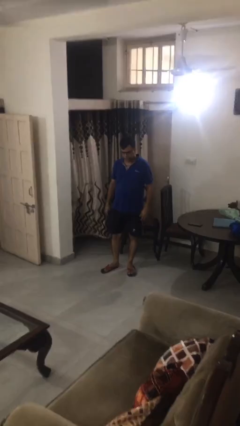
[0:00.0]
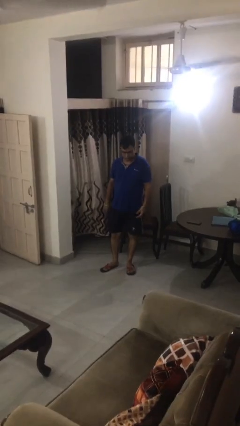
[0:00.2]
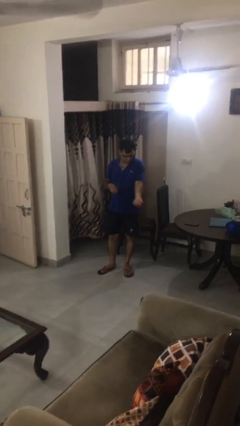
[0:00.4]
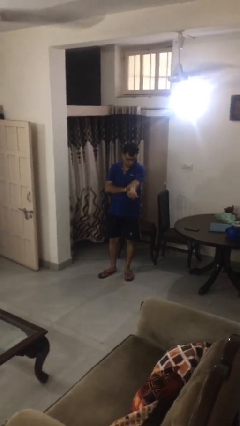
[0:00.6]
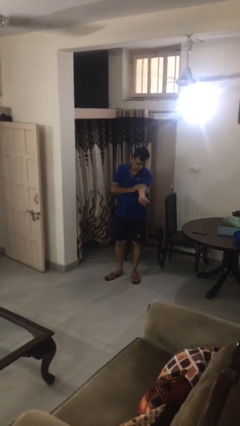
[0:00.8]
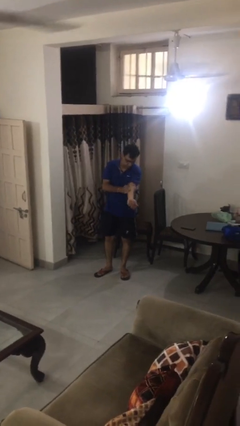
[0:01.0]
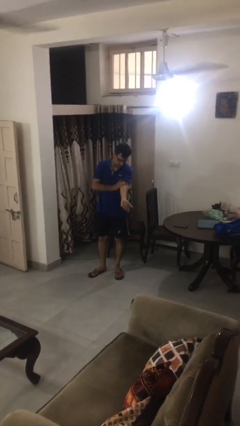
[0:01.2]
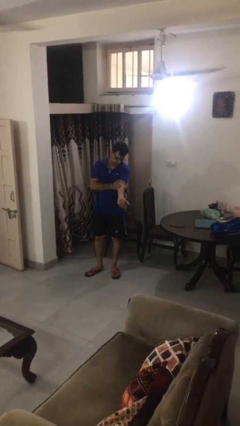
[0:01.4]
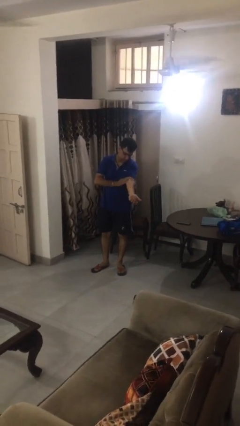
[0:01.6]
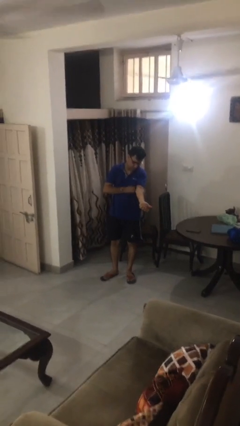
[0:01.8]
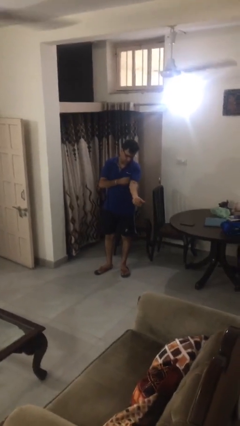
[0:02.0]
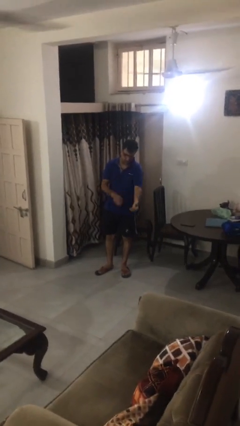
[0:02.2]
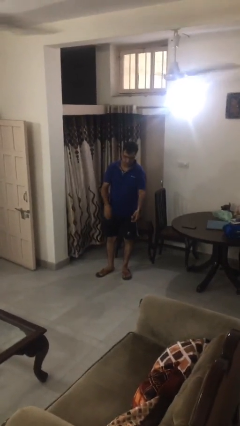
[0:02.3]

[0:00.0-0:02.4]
person swats bug

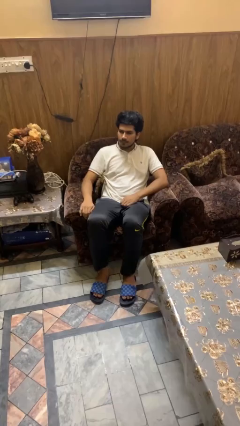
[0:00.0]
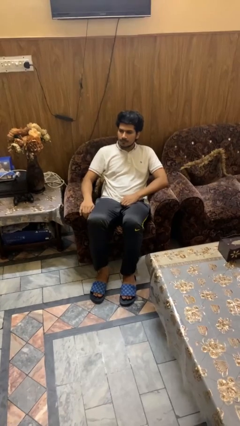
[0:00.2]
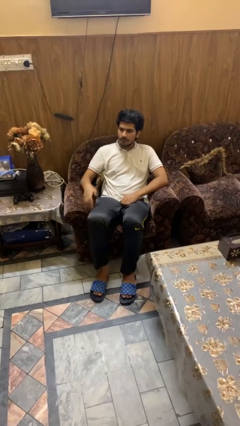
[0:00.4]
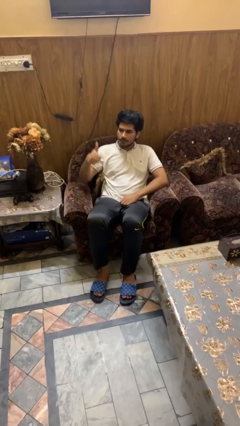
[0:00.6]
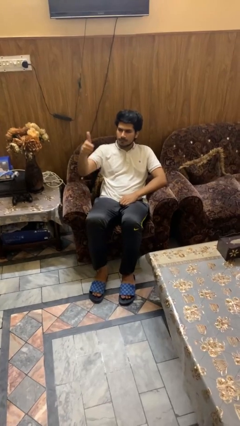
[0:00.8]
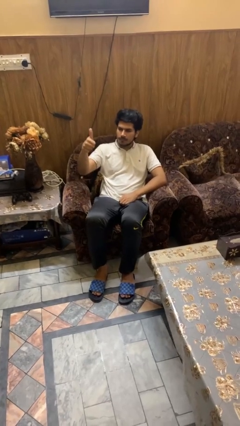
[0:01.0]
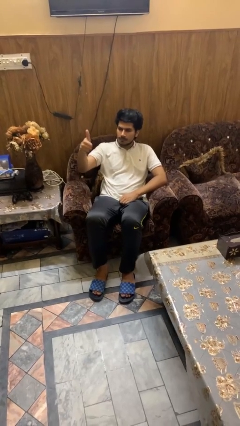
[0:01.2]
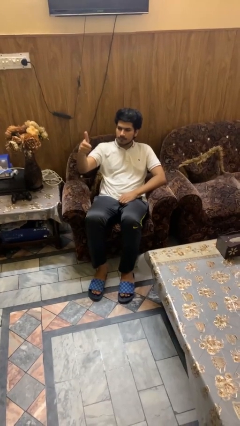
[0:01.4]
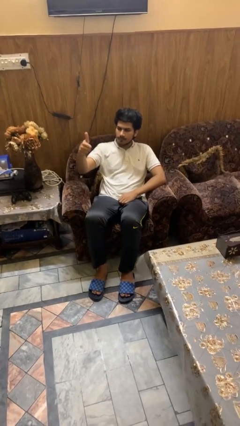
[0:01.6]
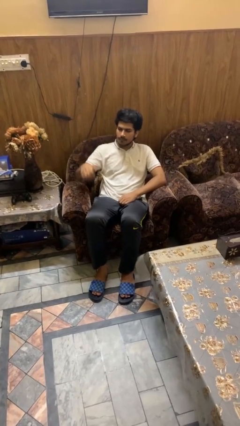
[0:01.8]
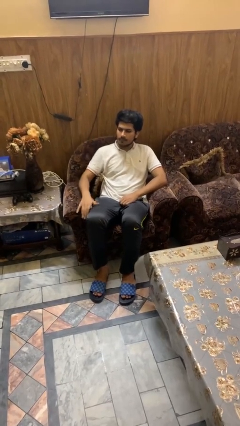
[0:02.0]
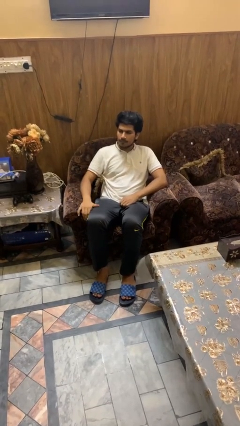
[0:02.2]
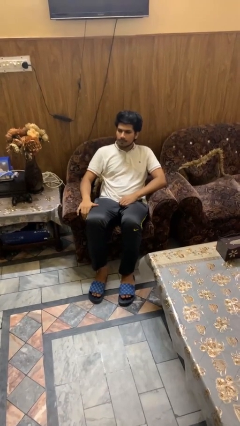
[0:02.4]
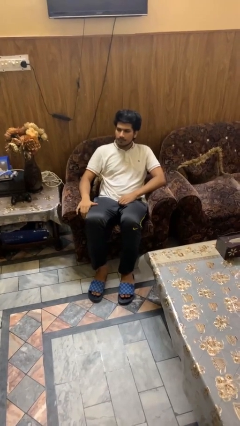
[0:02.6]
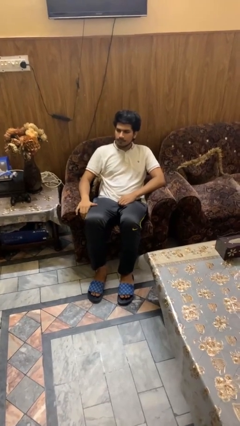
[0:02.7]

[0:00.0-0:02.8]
person gestures thumbs up

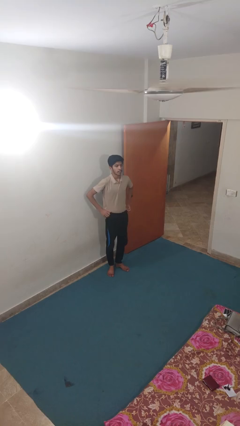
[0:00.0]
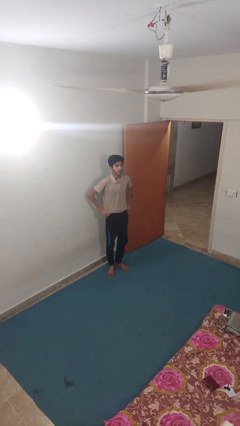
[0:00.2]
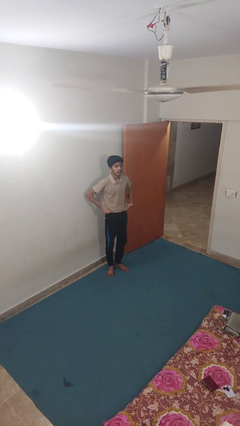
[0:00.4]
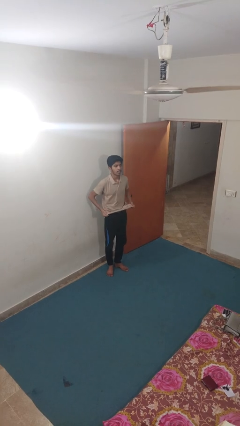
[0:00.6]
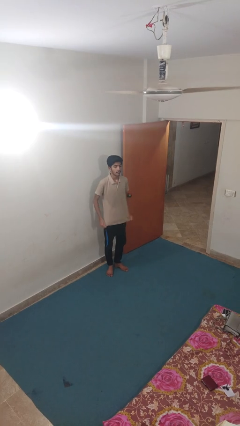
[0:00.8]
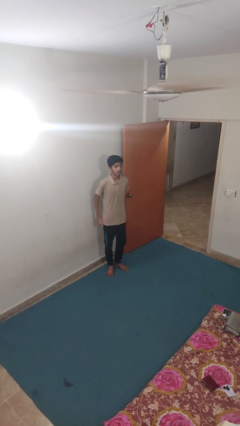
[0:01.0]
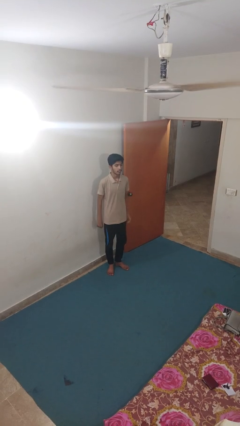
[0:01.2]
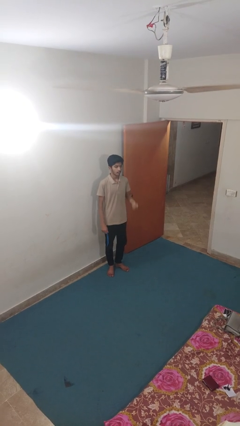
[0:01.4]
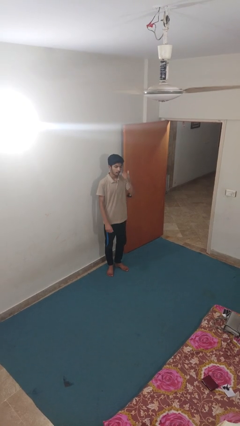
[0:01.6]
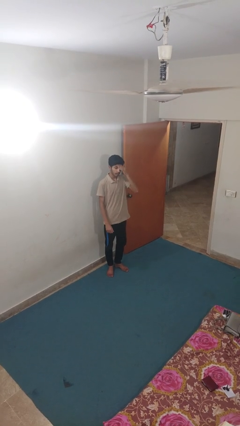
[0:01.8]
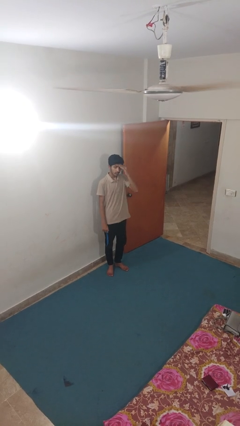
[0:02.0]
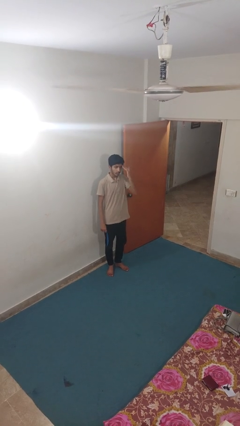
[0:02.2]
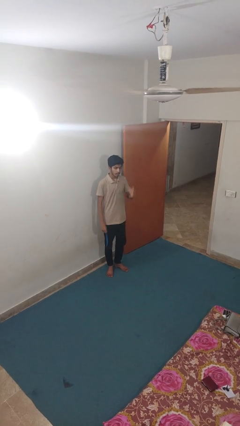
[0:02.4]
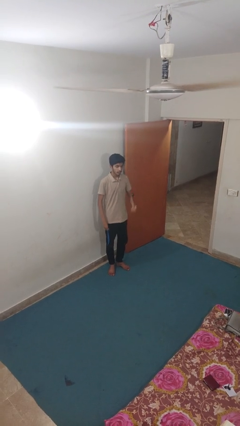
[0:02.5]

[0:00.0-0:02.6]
person untucks shirt

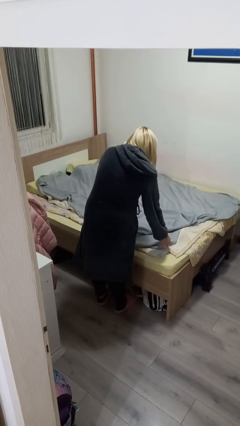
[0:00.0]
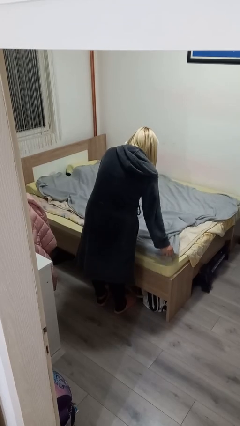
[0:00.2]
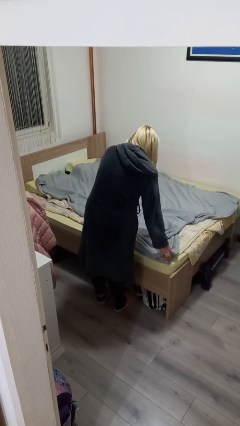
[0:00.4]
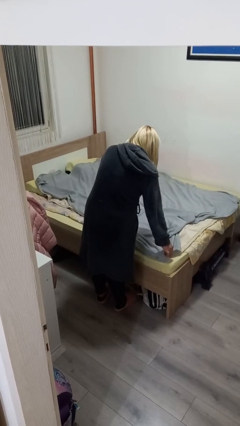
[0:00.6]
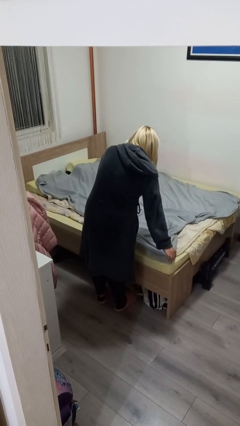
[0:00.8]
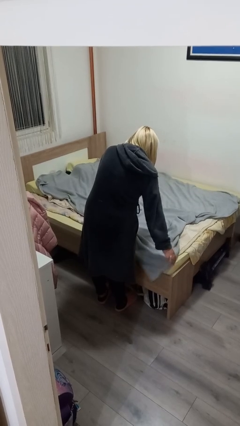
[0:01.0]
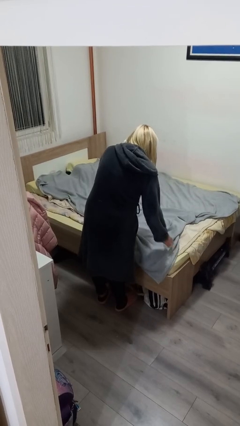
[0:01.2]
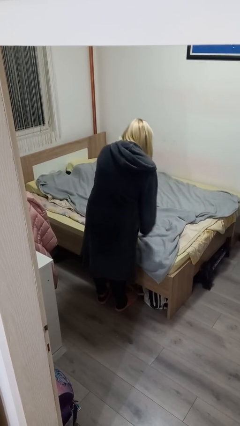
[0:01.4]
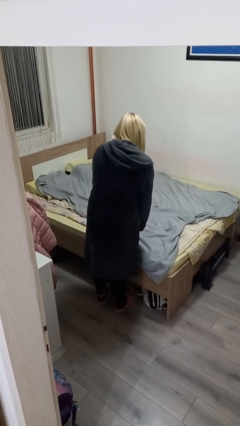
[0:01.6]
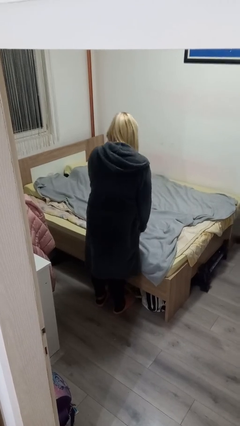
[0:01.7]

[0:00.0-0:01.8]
person makes bed

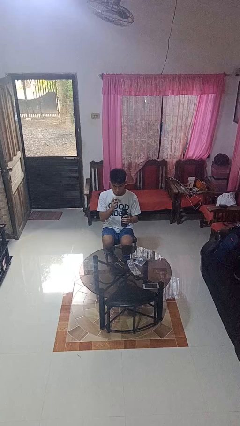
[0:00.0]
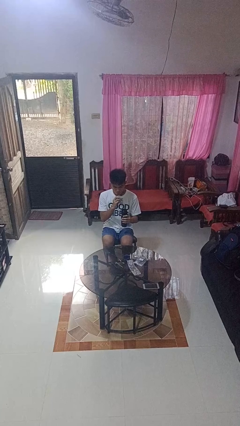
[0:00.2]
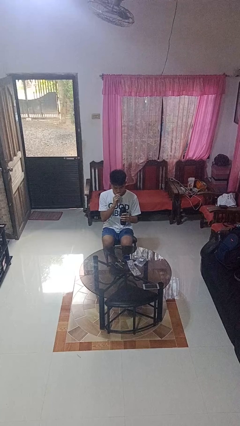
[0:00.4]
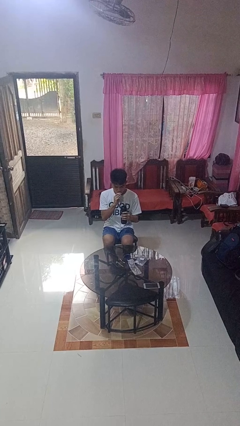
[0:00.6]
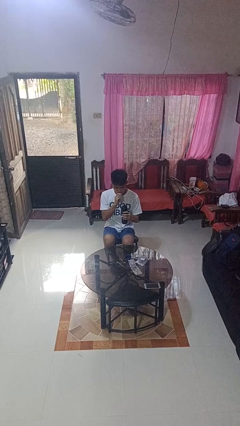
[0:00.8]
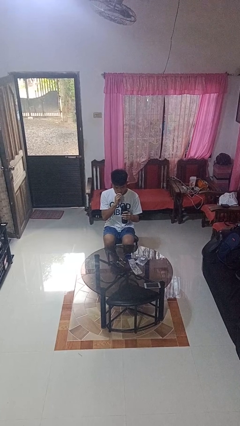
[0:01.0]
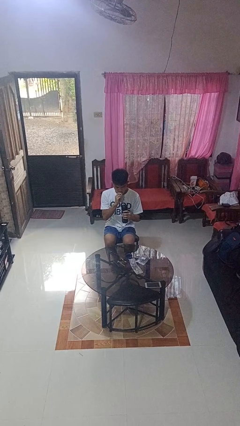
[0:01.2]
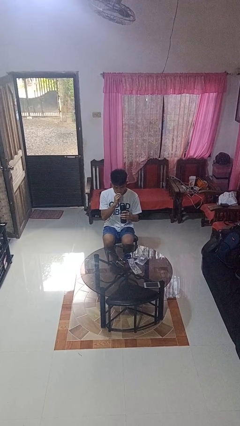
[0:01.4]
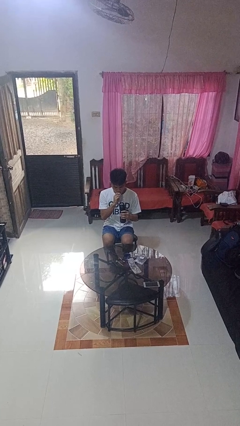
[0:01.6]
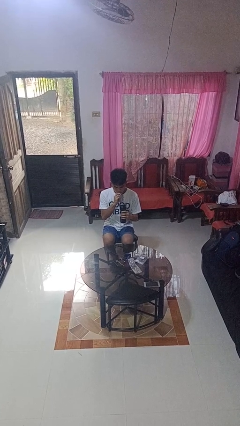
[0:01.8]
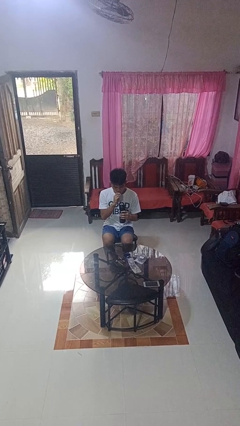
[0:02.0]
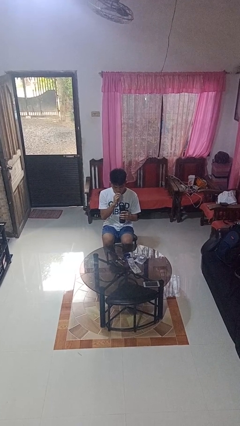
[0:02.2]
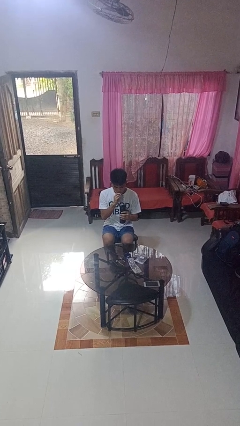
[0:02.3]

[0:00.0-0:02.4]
person drinks from straw

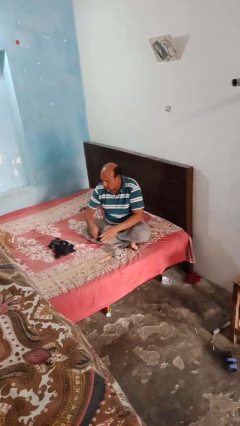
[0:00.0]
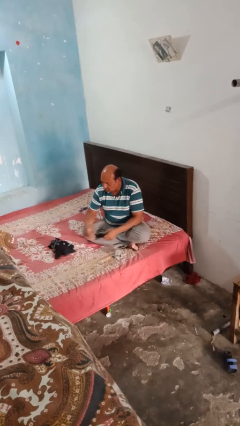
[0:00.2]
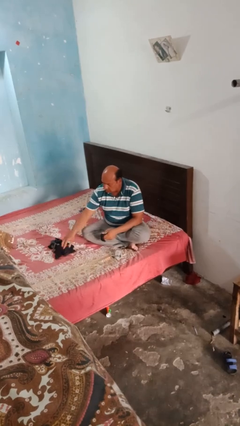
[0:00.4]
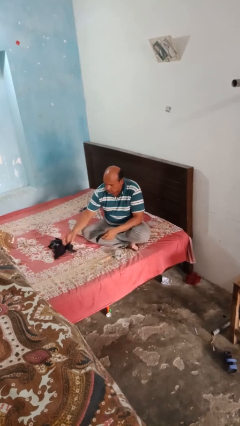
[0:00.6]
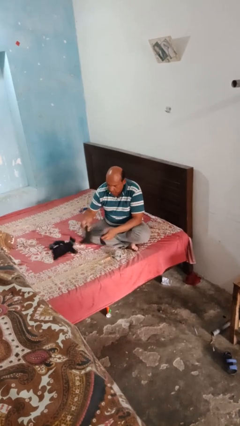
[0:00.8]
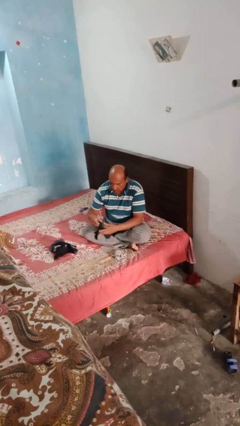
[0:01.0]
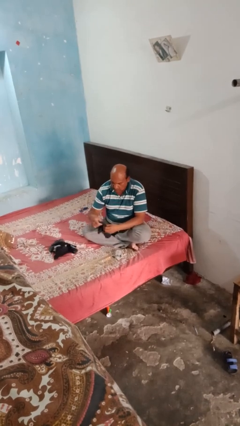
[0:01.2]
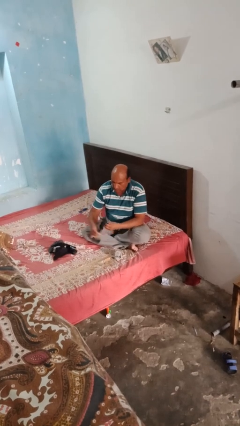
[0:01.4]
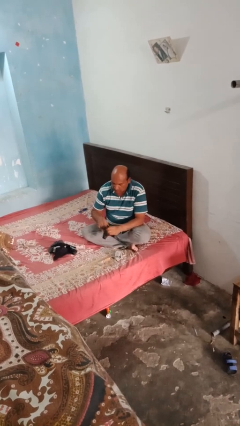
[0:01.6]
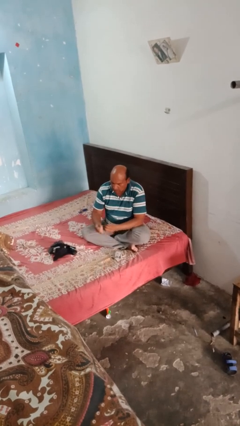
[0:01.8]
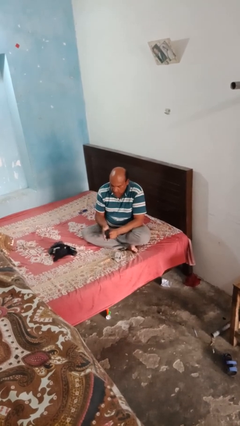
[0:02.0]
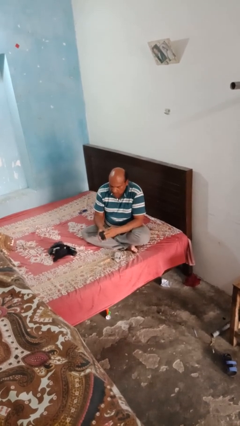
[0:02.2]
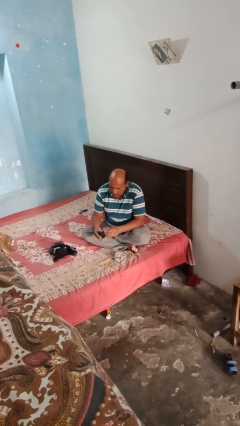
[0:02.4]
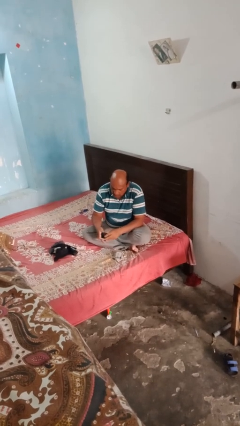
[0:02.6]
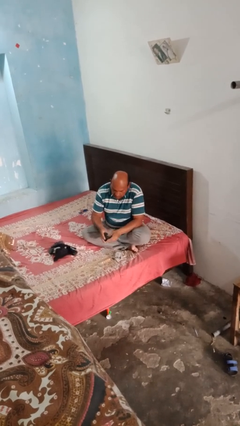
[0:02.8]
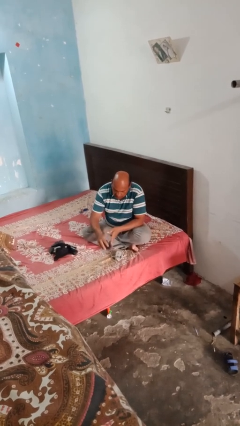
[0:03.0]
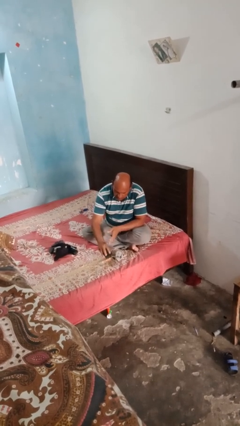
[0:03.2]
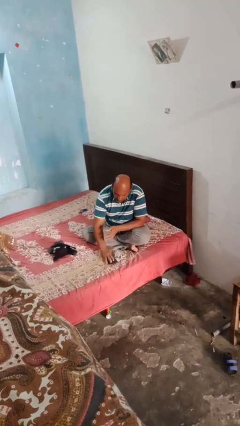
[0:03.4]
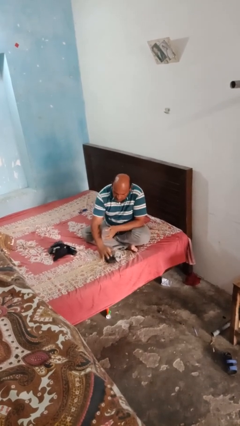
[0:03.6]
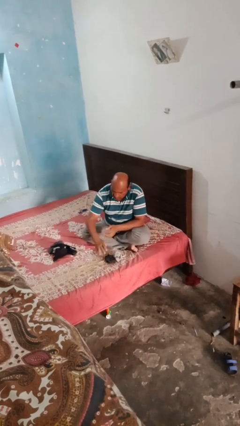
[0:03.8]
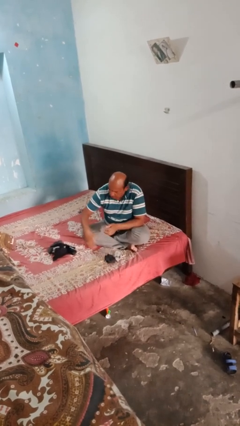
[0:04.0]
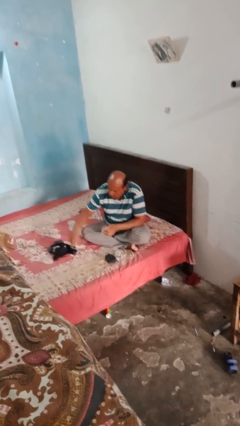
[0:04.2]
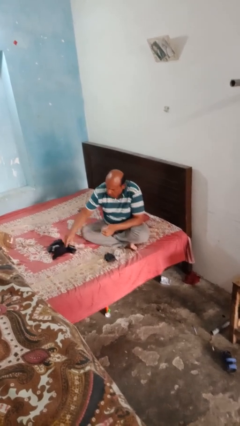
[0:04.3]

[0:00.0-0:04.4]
person folds socks

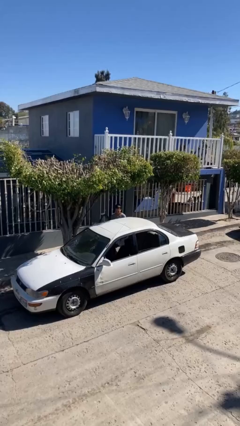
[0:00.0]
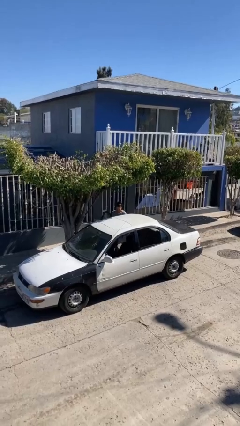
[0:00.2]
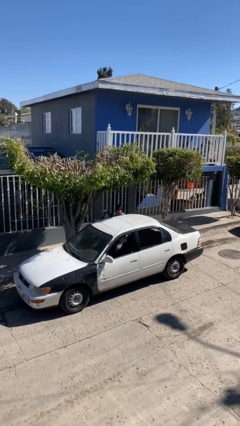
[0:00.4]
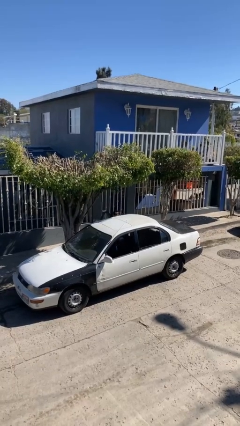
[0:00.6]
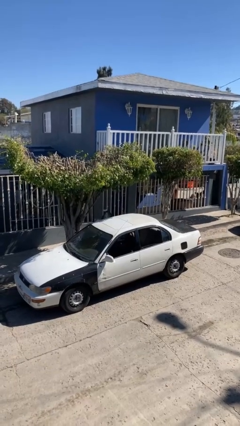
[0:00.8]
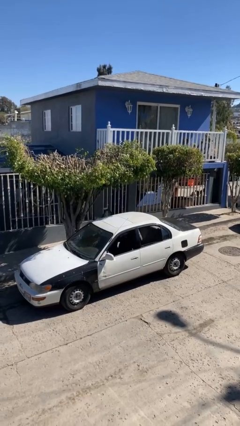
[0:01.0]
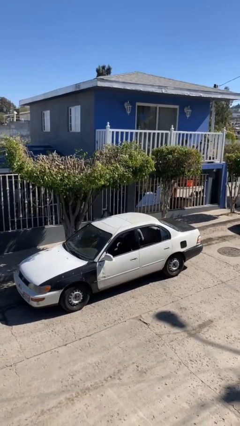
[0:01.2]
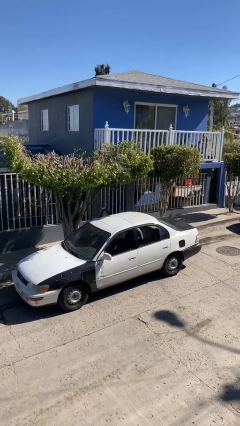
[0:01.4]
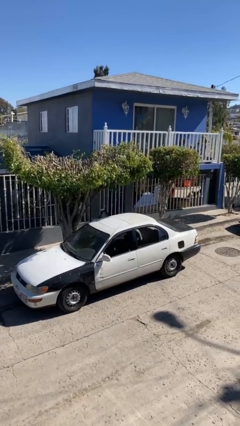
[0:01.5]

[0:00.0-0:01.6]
person enters car
